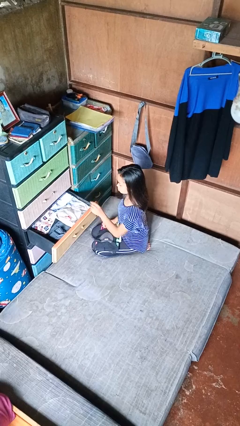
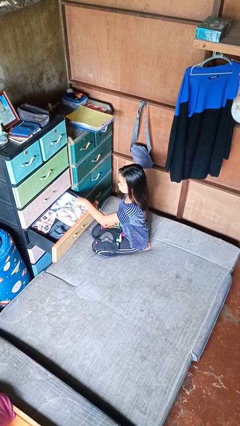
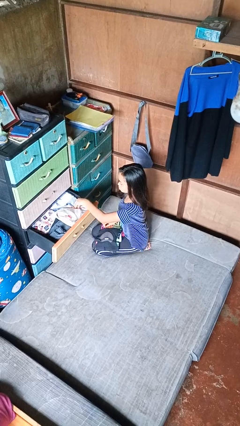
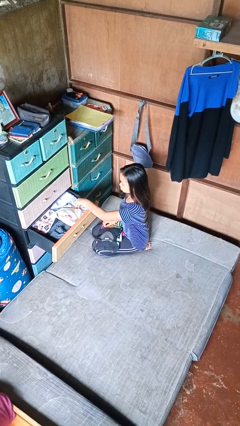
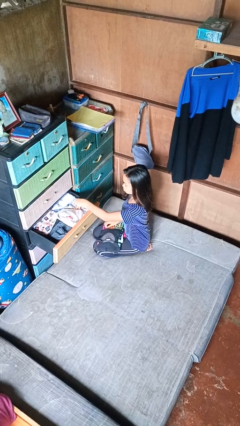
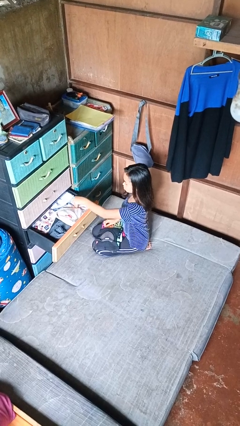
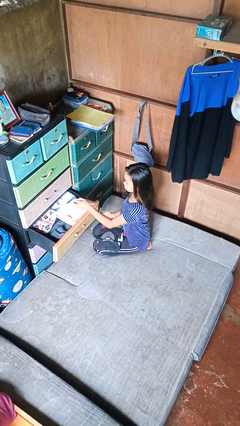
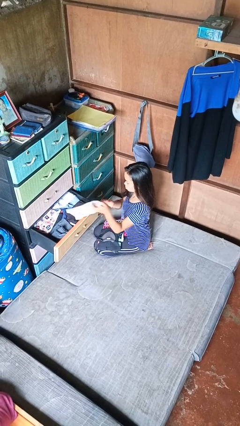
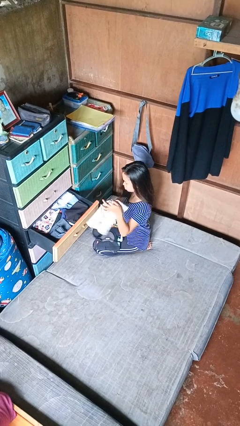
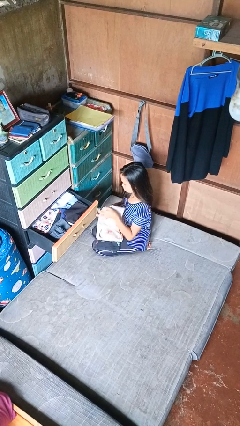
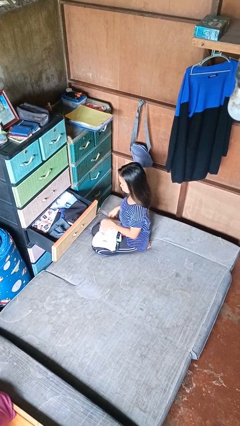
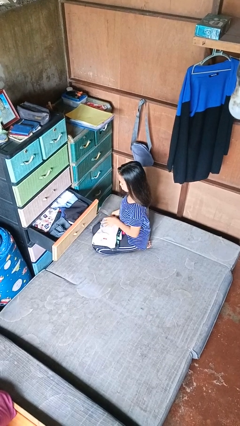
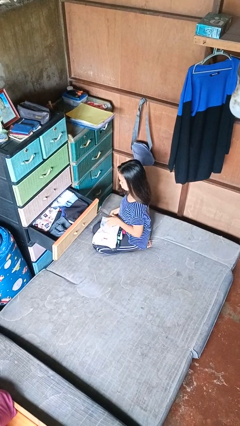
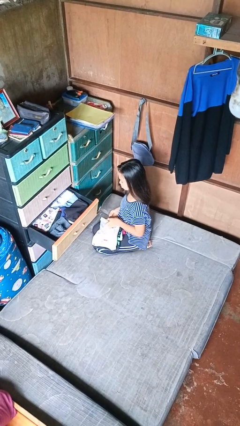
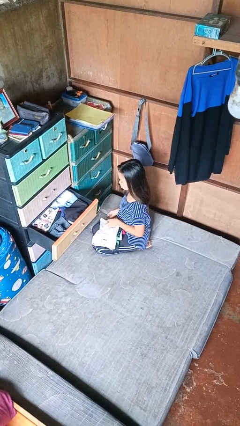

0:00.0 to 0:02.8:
person takes clothes from dresser

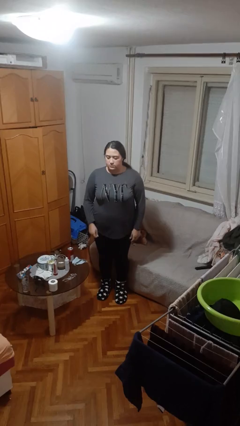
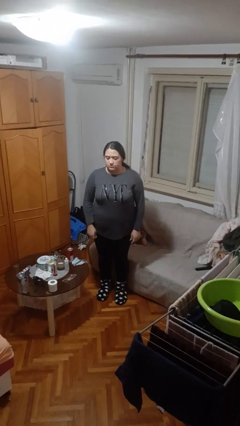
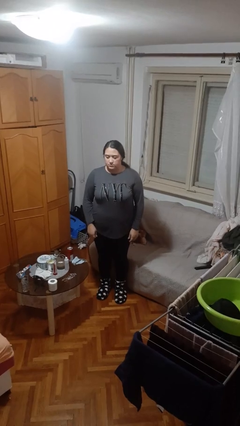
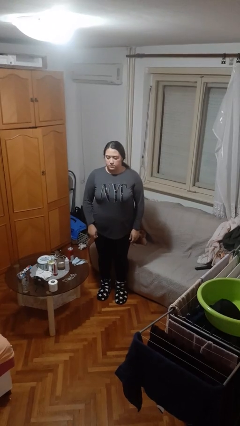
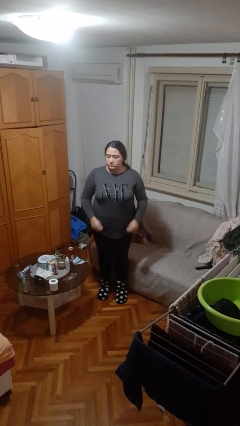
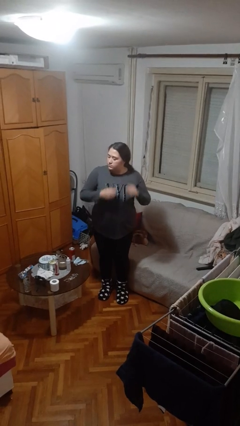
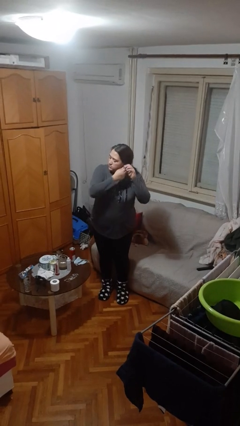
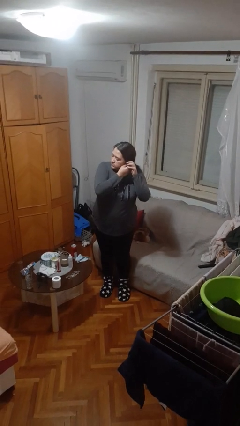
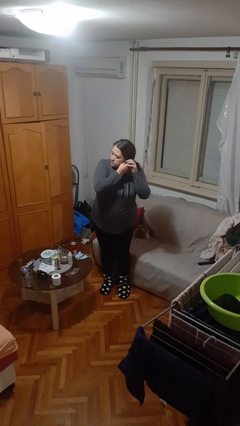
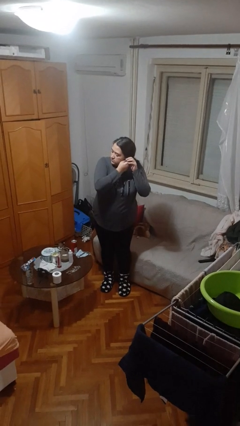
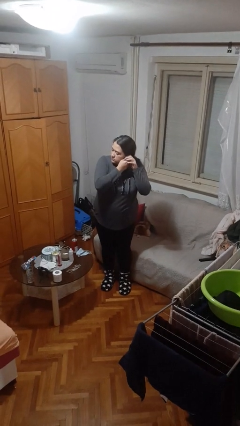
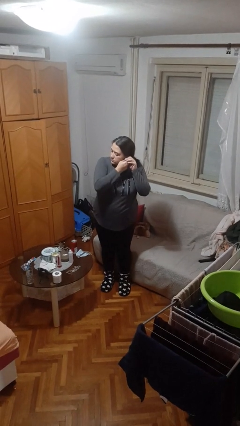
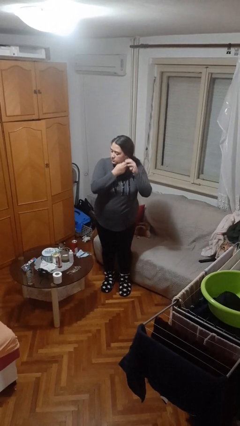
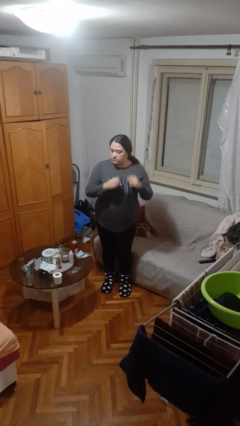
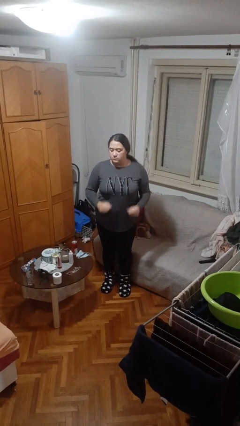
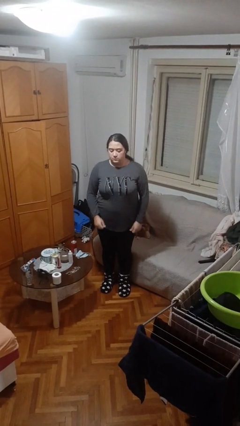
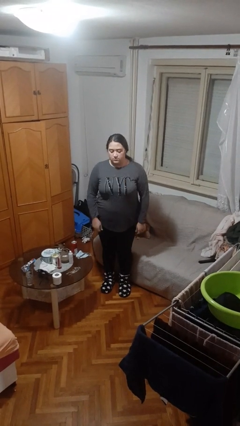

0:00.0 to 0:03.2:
person takes off earrings

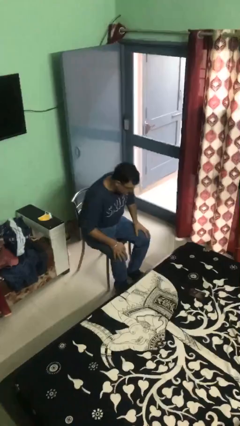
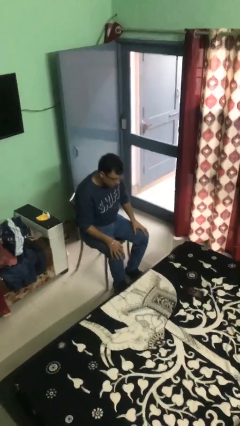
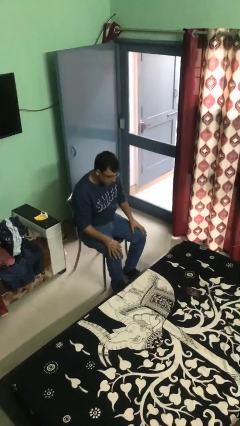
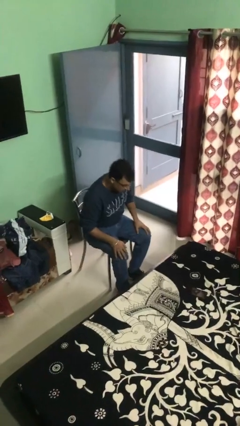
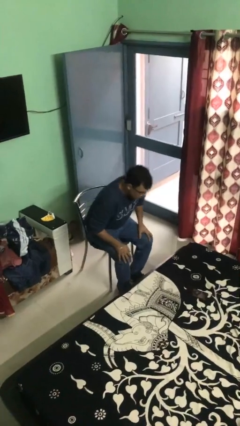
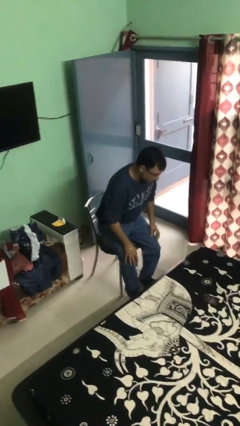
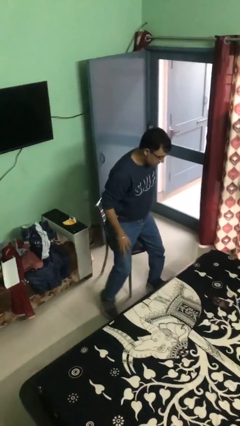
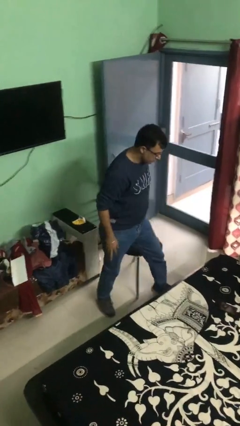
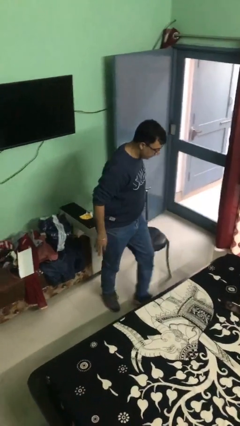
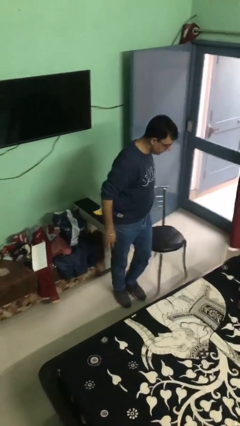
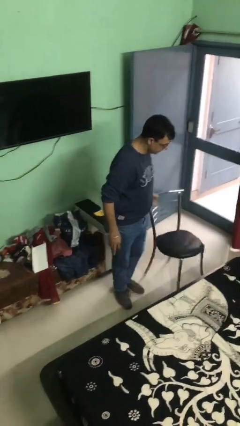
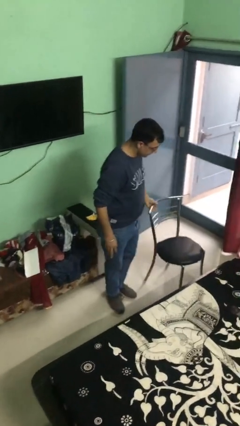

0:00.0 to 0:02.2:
person stands up

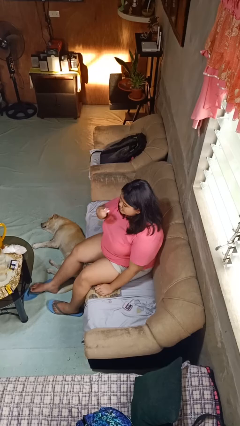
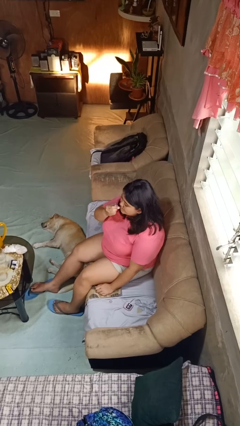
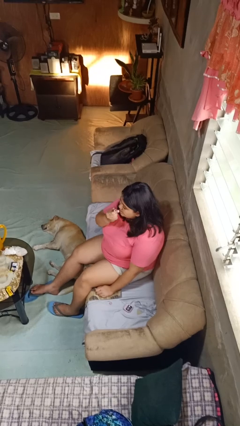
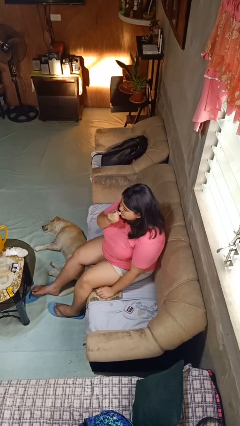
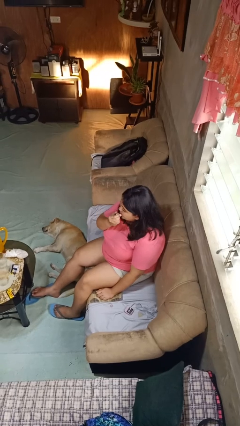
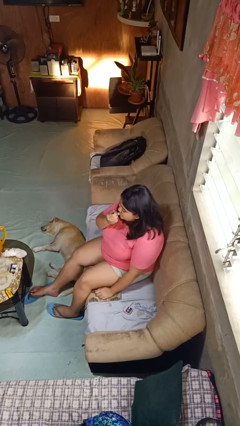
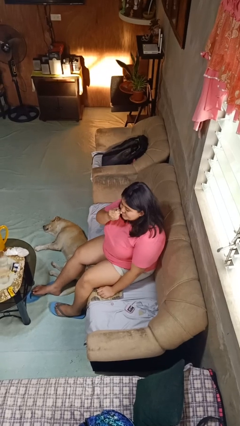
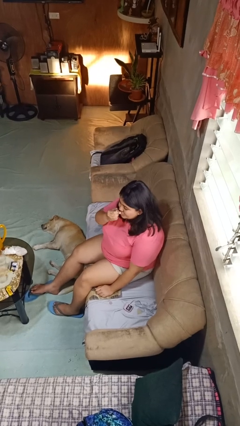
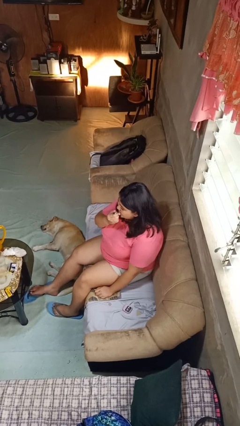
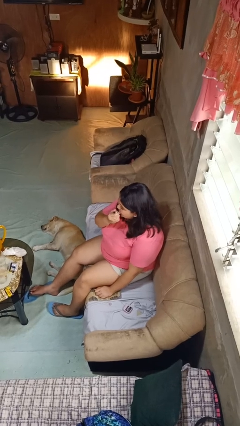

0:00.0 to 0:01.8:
person applies lip makeup

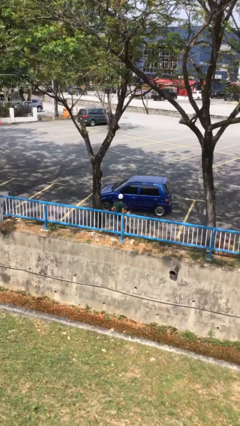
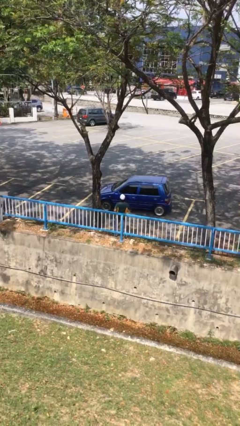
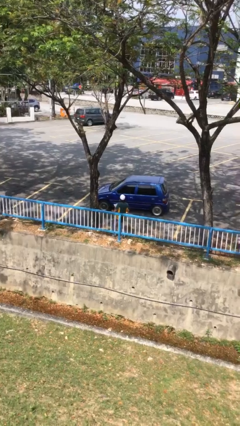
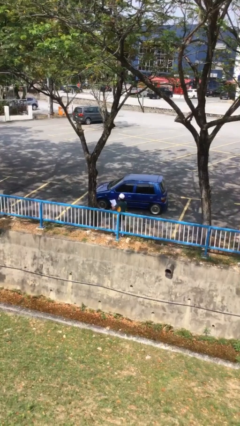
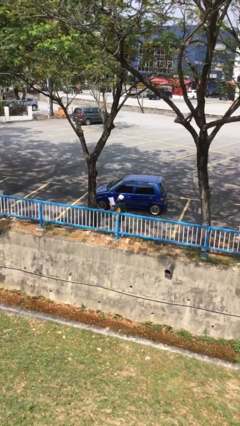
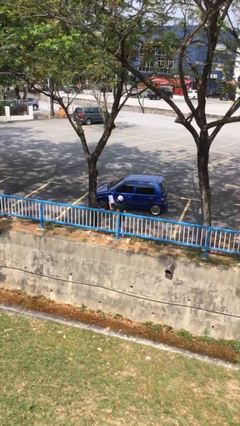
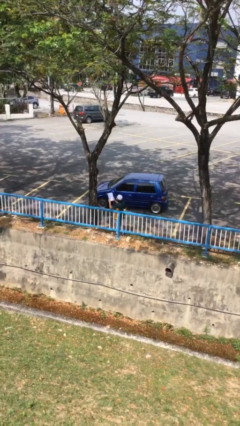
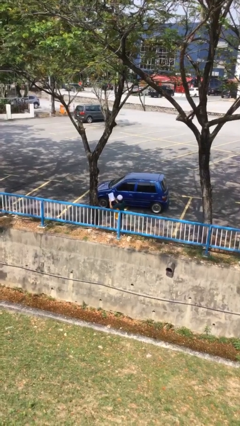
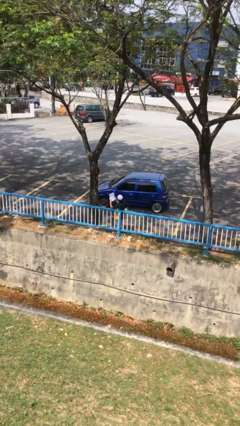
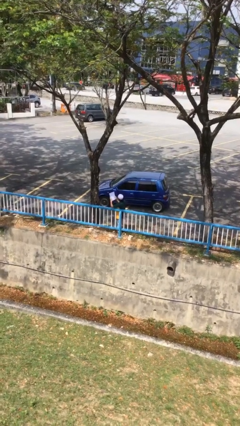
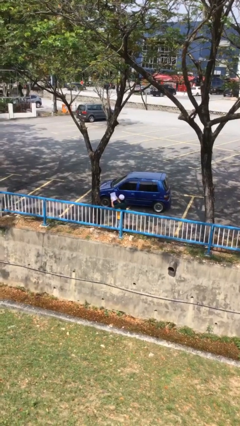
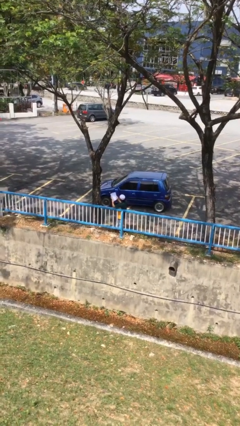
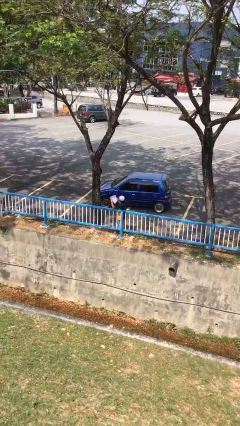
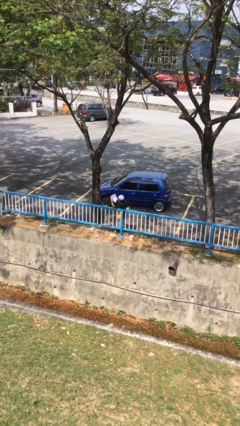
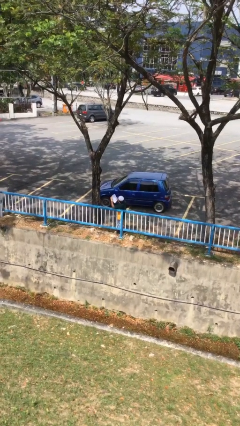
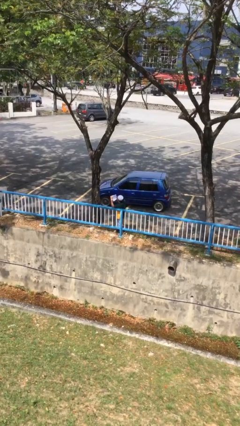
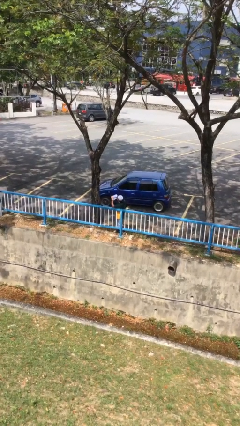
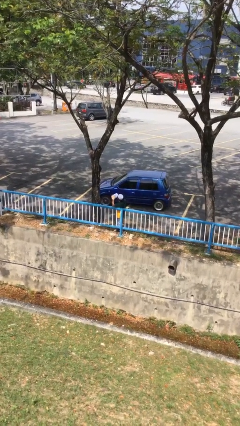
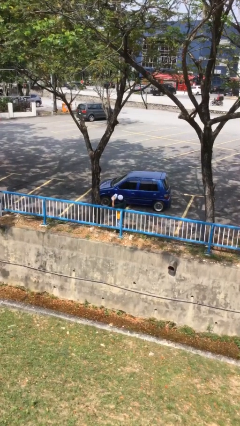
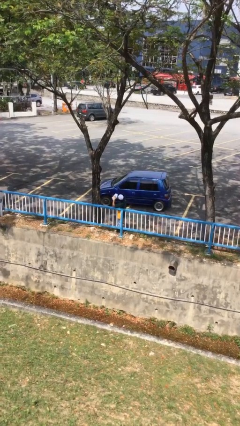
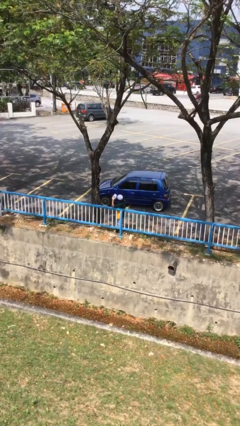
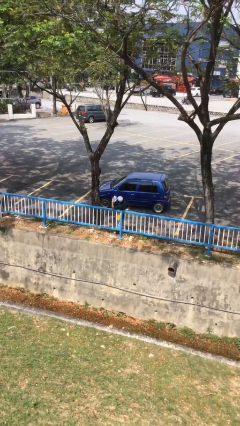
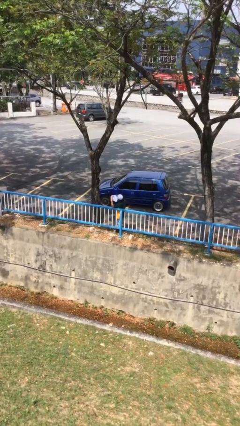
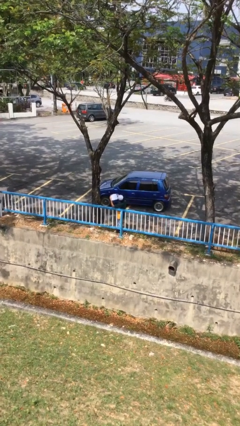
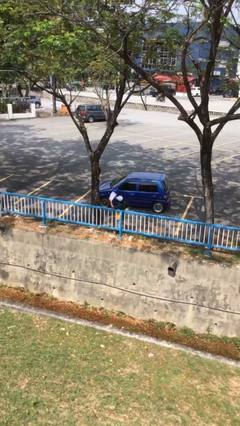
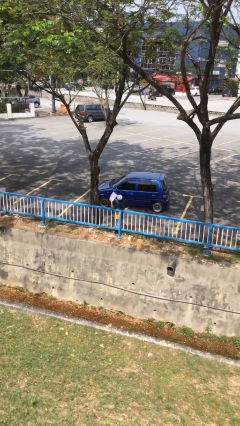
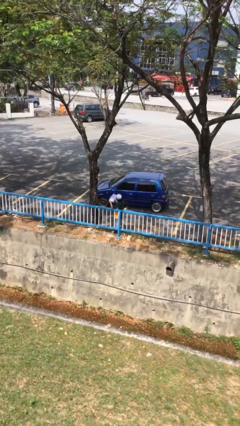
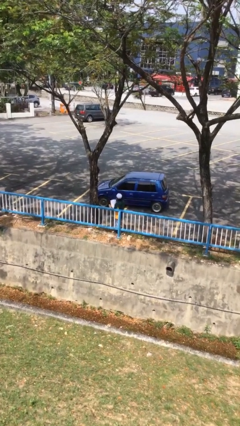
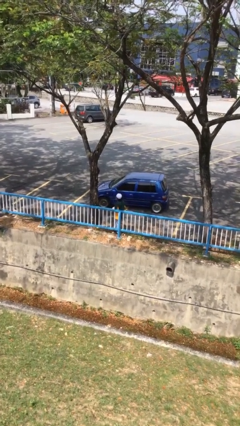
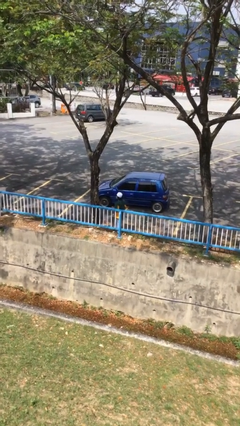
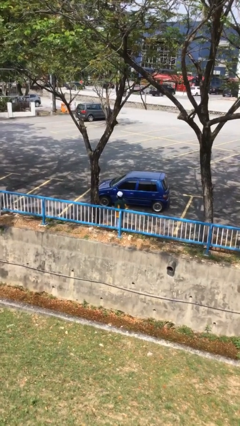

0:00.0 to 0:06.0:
person reads document

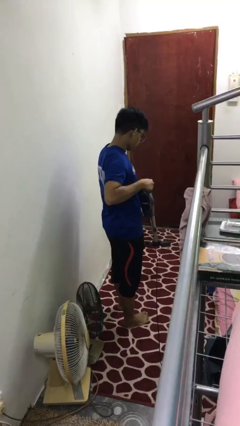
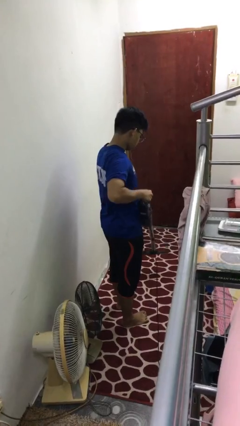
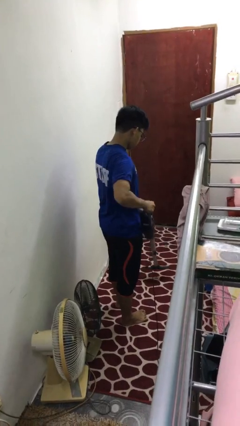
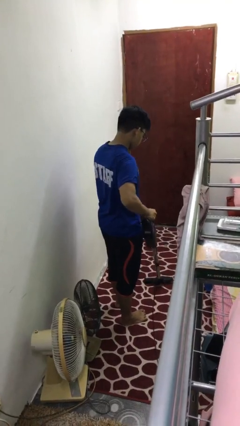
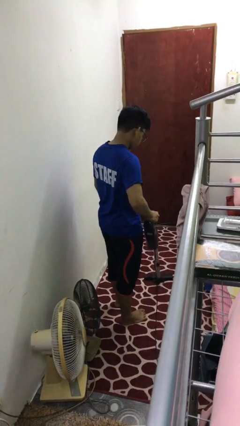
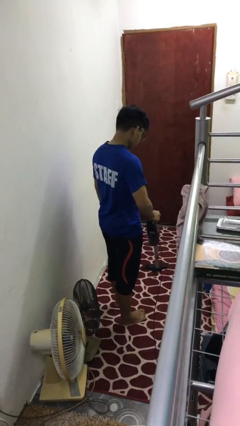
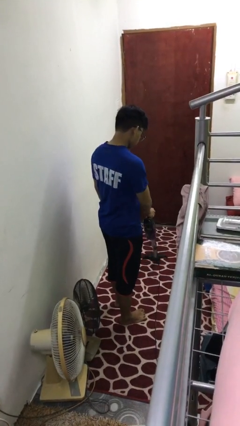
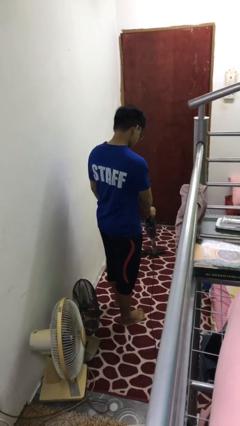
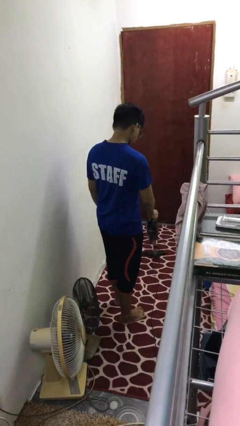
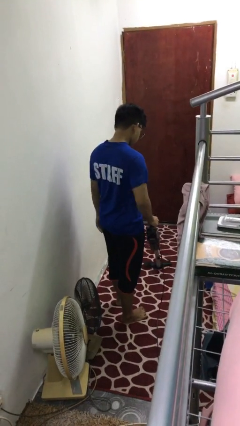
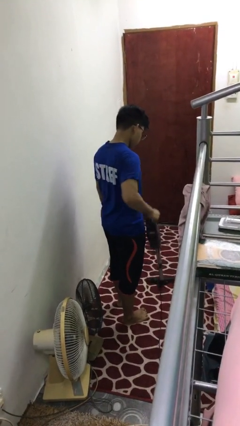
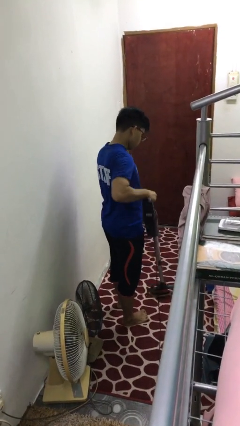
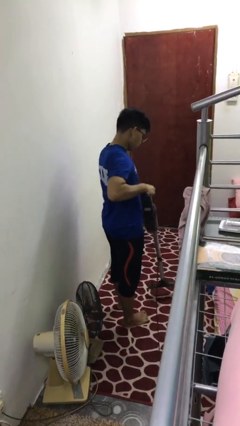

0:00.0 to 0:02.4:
person vacuums carpet
